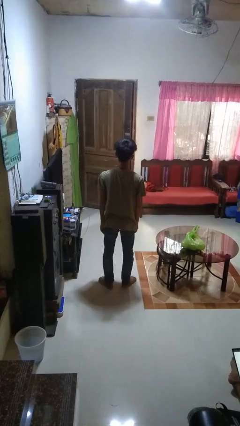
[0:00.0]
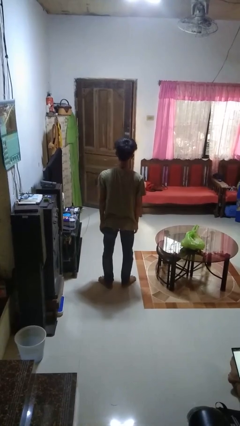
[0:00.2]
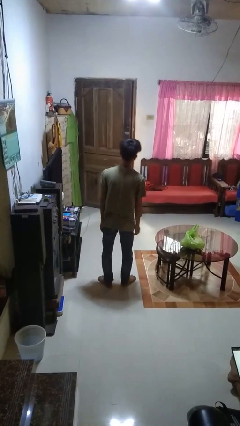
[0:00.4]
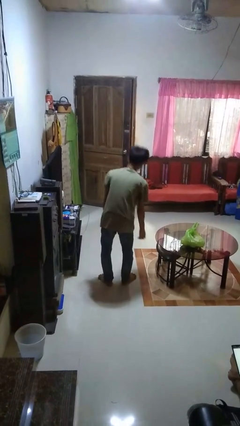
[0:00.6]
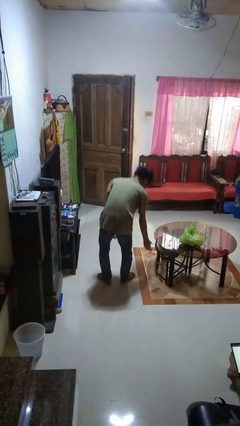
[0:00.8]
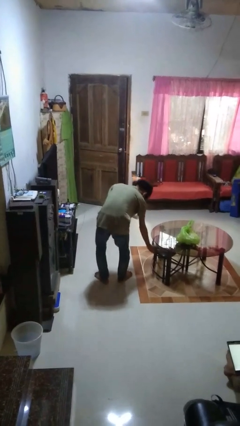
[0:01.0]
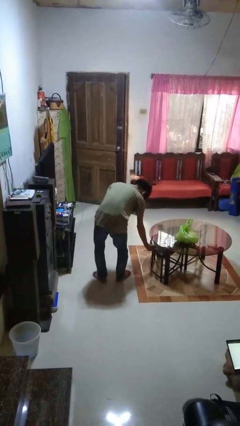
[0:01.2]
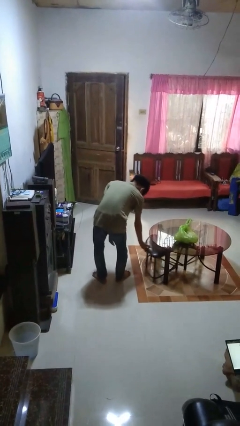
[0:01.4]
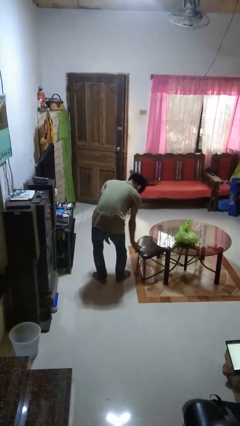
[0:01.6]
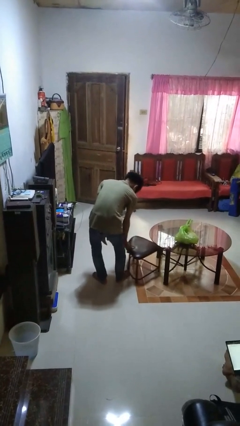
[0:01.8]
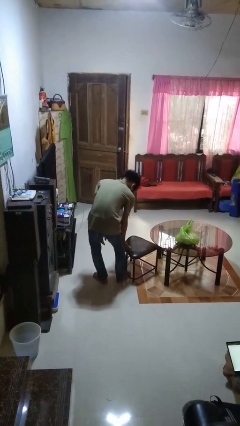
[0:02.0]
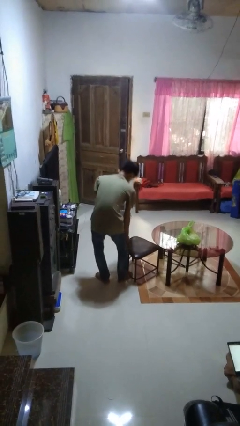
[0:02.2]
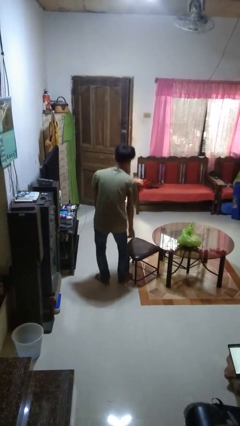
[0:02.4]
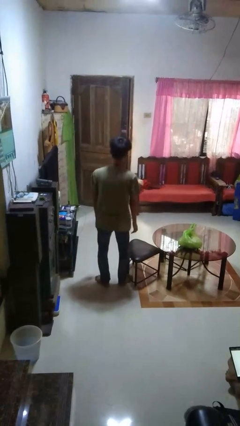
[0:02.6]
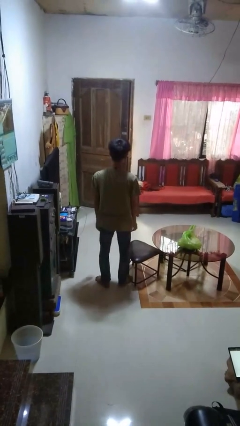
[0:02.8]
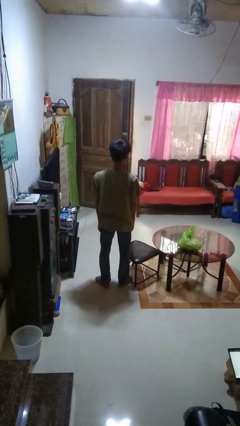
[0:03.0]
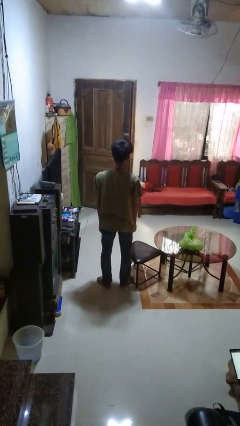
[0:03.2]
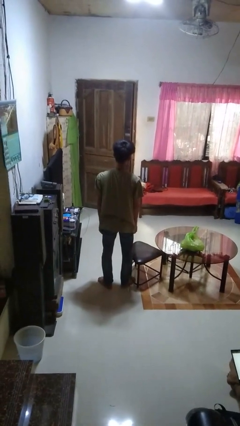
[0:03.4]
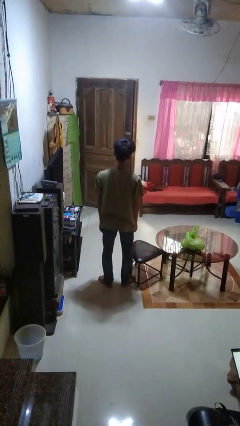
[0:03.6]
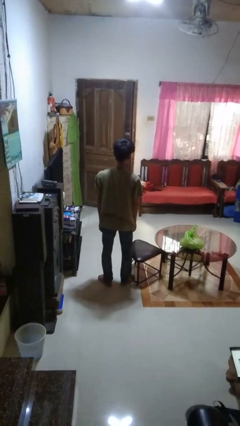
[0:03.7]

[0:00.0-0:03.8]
person pulls out chair

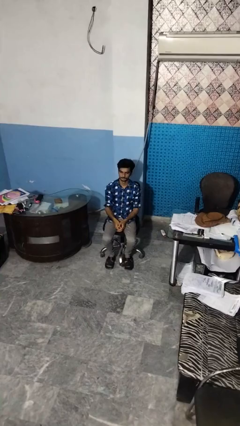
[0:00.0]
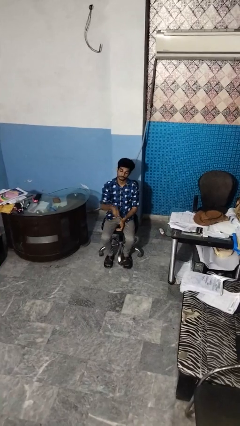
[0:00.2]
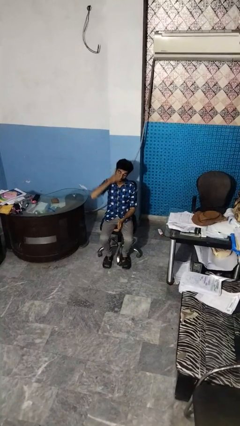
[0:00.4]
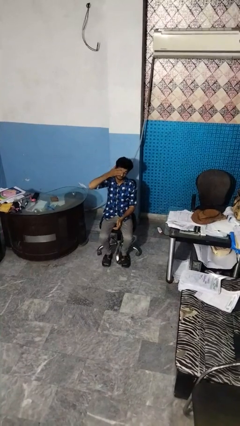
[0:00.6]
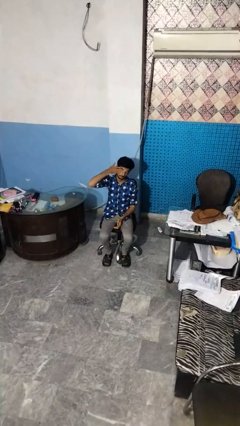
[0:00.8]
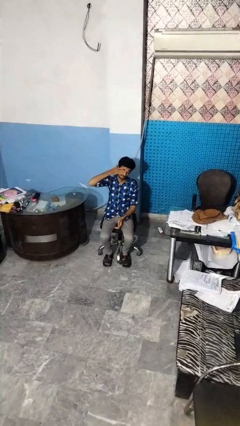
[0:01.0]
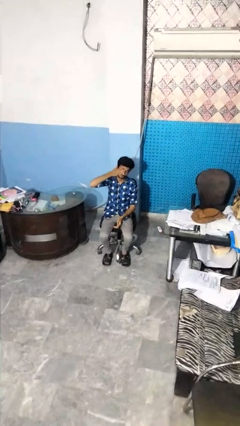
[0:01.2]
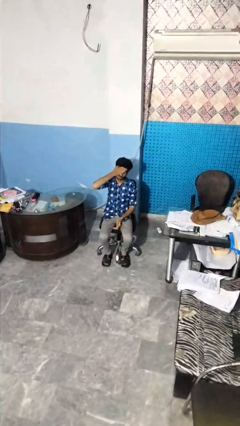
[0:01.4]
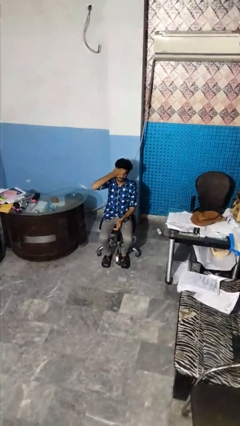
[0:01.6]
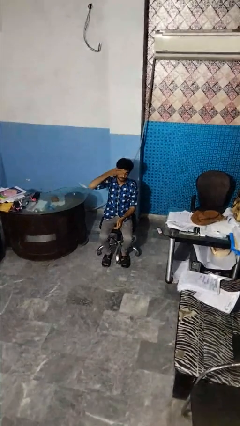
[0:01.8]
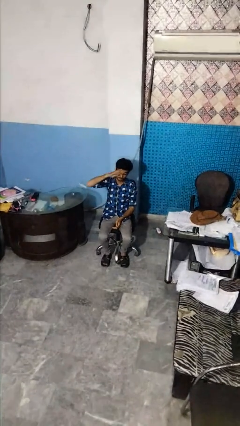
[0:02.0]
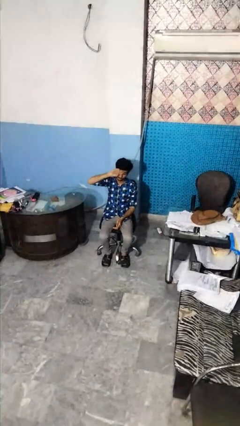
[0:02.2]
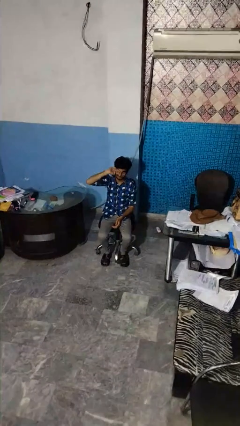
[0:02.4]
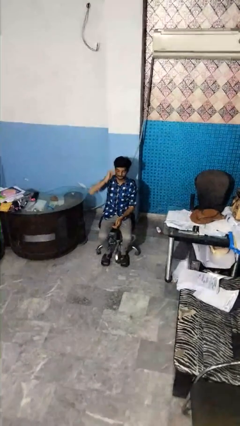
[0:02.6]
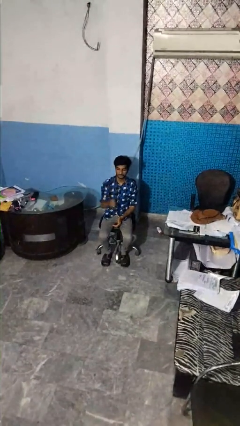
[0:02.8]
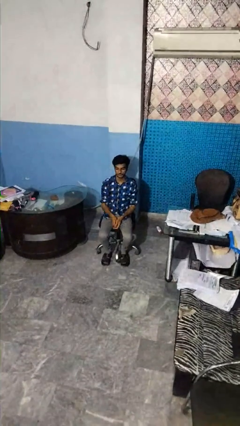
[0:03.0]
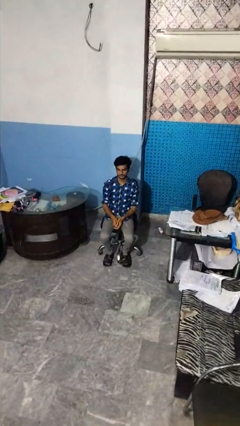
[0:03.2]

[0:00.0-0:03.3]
person rubs eyes

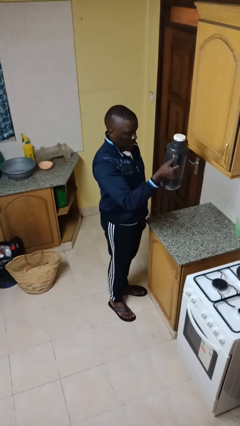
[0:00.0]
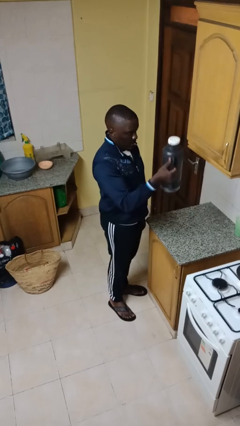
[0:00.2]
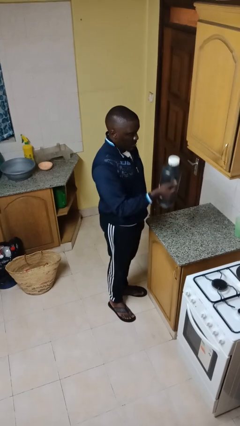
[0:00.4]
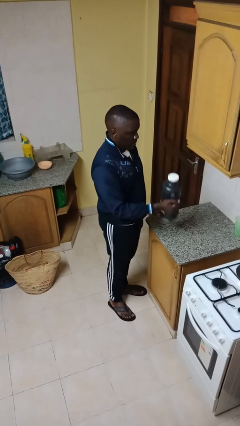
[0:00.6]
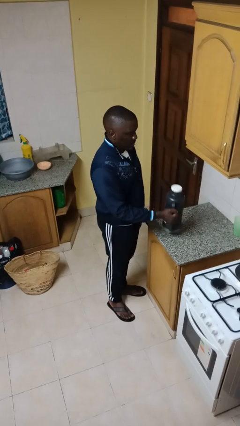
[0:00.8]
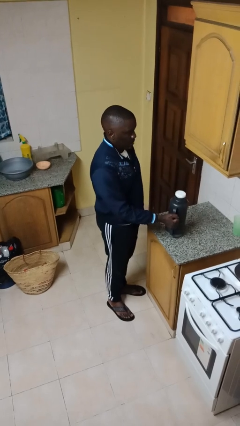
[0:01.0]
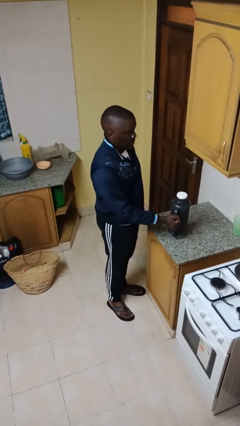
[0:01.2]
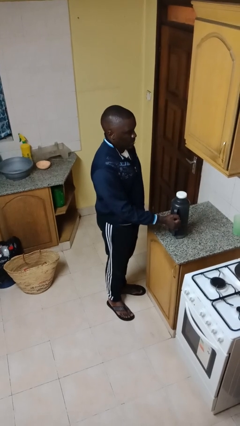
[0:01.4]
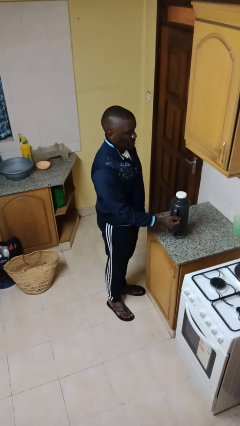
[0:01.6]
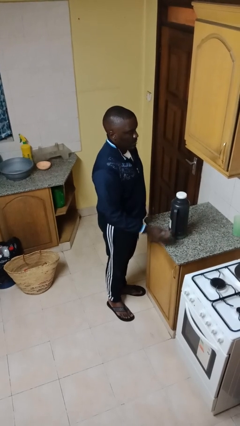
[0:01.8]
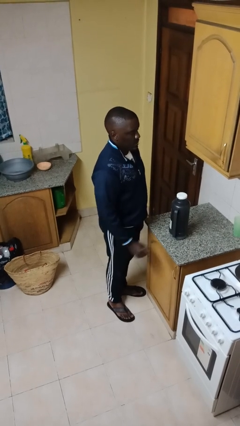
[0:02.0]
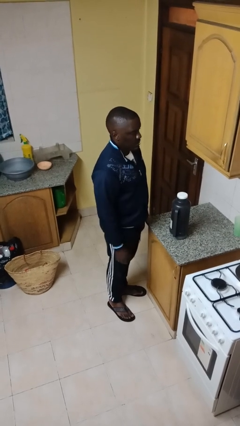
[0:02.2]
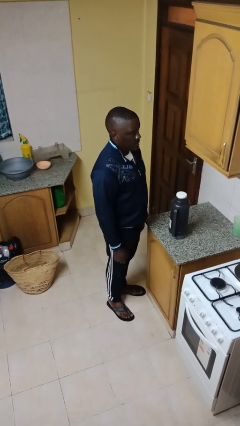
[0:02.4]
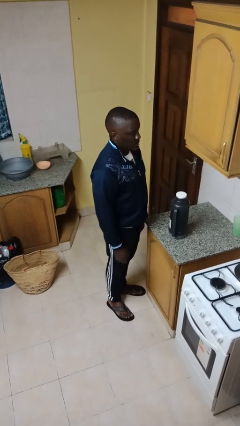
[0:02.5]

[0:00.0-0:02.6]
person puts down object on countertop

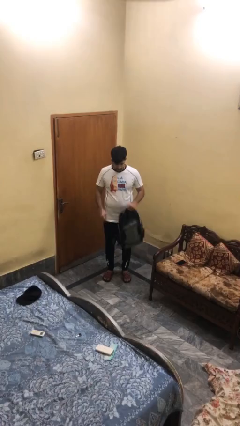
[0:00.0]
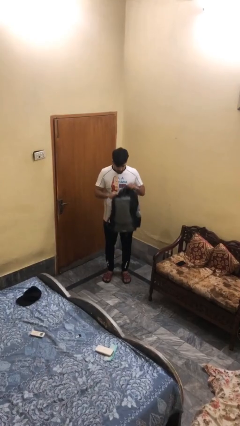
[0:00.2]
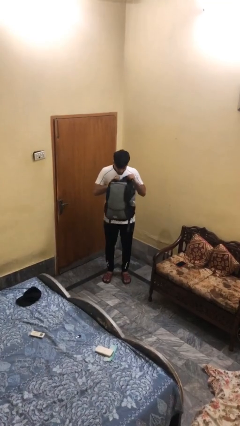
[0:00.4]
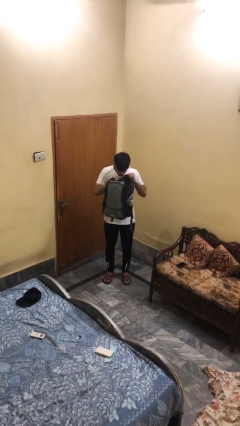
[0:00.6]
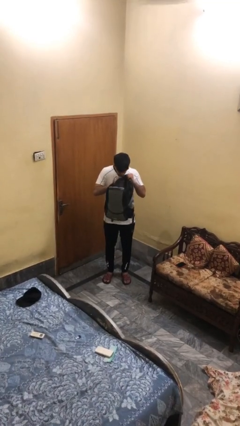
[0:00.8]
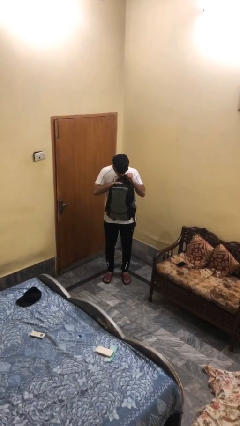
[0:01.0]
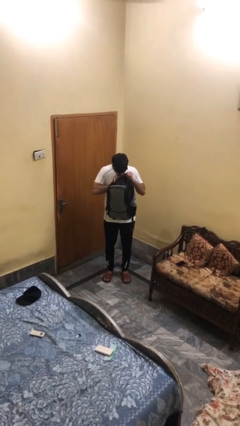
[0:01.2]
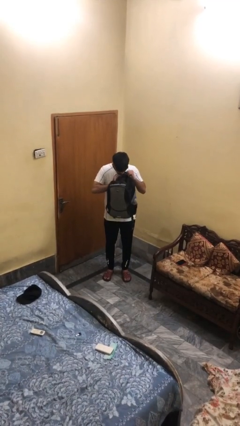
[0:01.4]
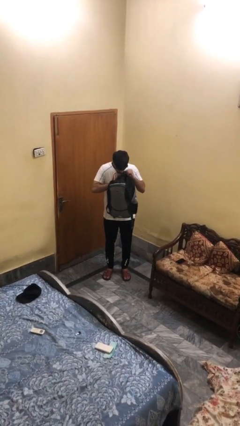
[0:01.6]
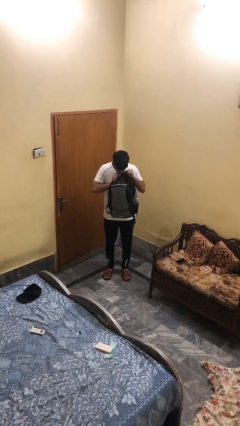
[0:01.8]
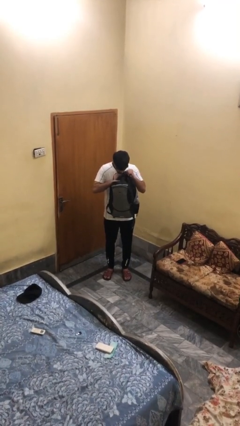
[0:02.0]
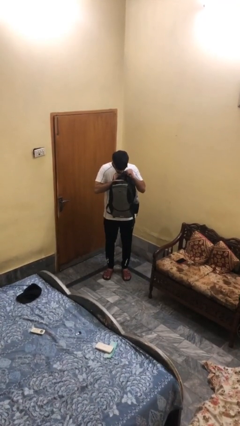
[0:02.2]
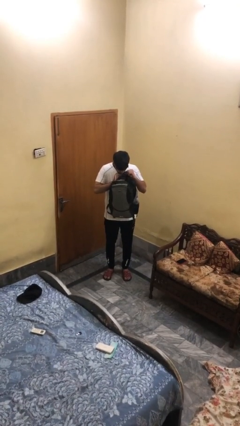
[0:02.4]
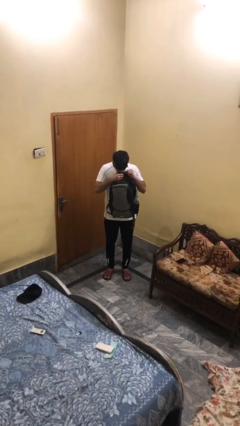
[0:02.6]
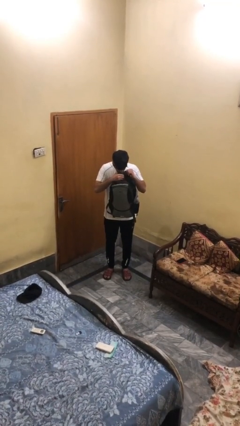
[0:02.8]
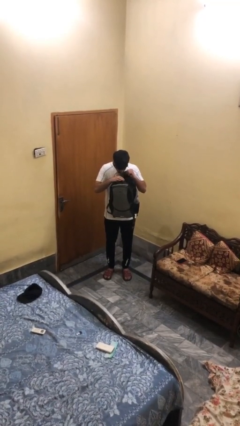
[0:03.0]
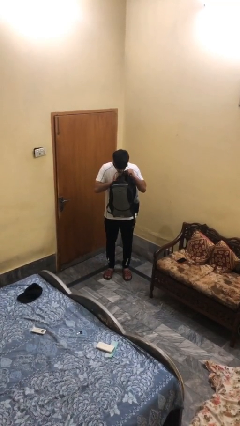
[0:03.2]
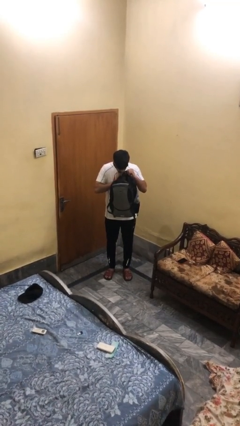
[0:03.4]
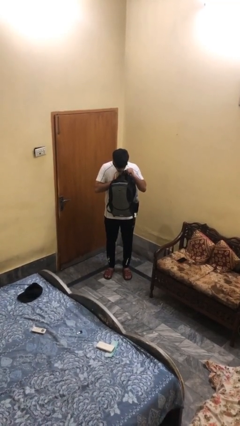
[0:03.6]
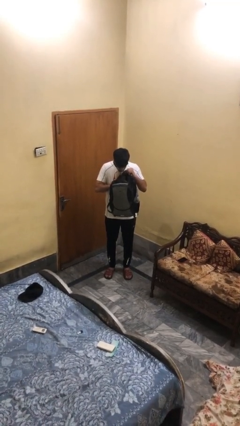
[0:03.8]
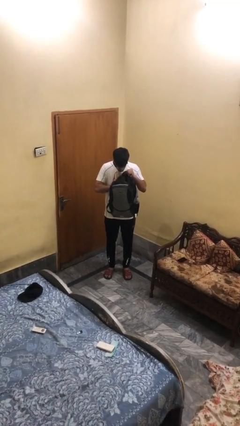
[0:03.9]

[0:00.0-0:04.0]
person searches in backpack

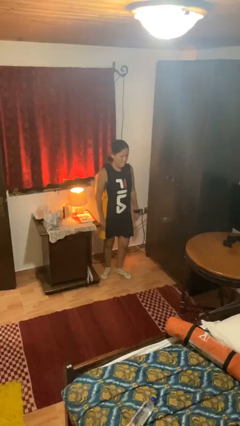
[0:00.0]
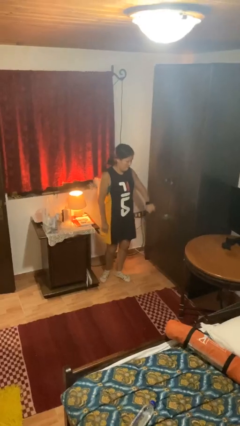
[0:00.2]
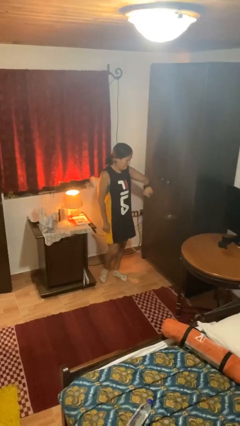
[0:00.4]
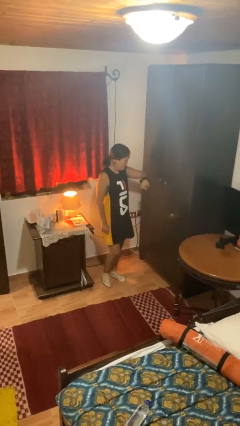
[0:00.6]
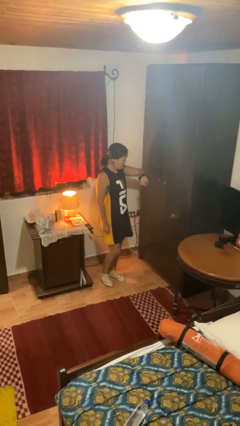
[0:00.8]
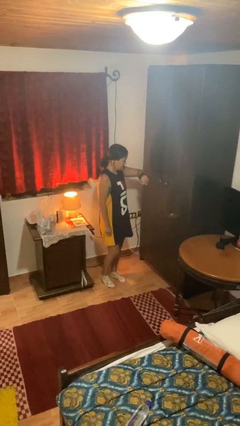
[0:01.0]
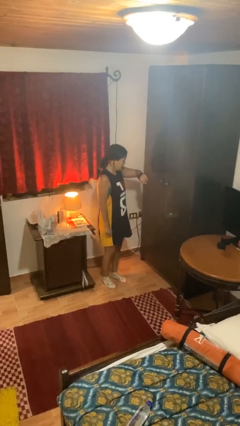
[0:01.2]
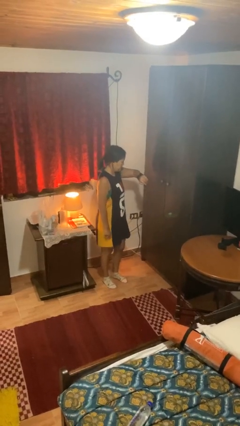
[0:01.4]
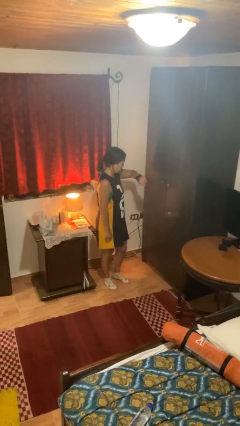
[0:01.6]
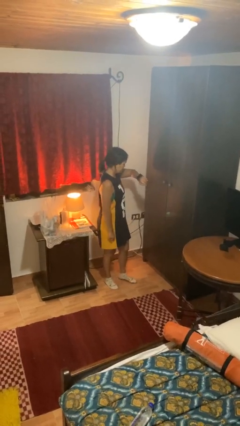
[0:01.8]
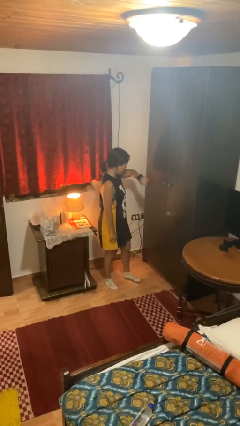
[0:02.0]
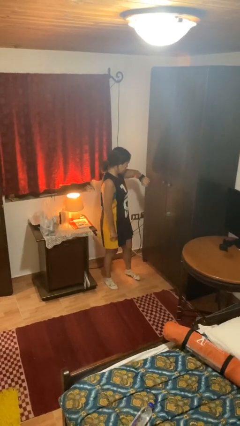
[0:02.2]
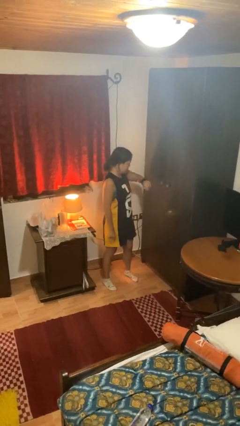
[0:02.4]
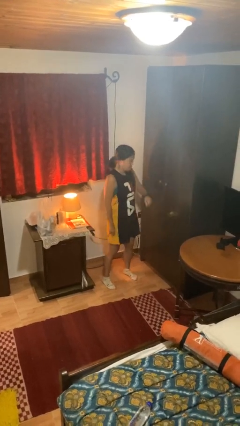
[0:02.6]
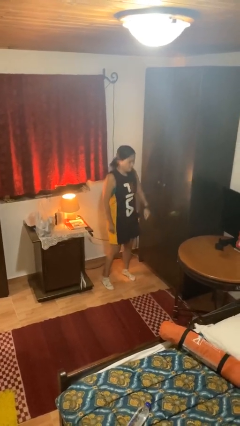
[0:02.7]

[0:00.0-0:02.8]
person looks at wristwatch

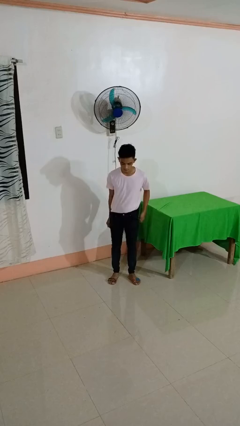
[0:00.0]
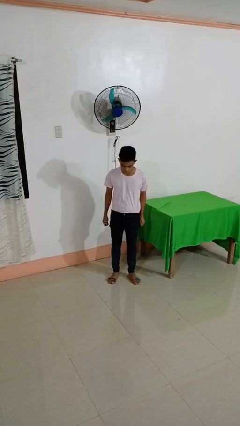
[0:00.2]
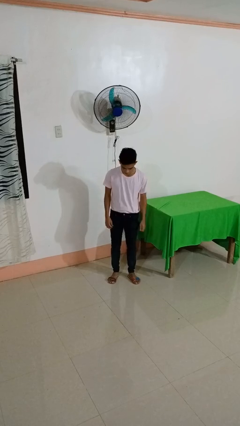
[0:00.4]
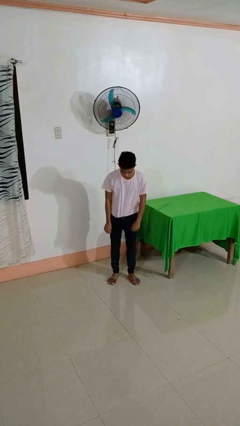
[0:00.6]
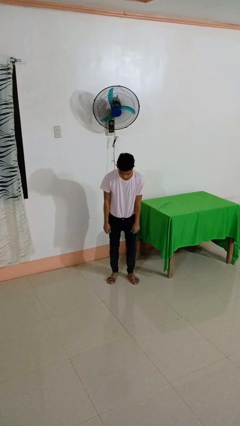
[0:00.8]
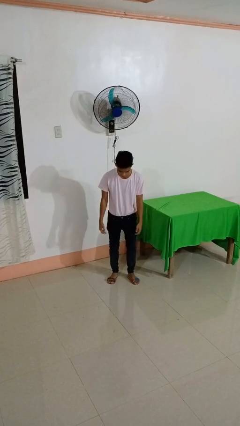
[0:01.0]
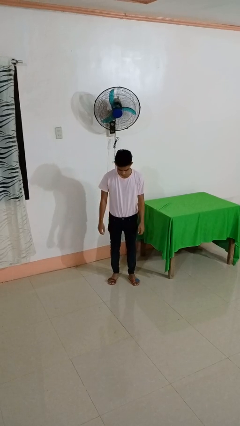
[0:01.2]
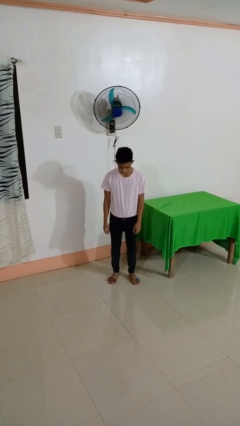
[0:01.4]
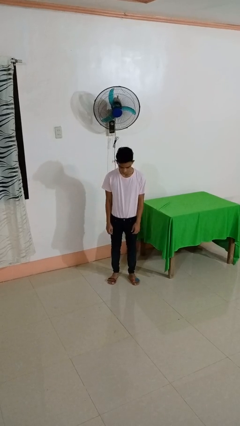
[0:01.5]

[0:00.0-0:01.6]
person hikes up pants
